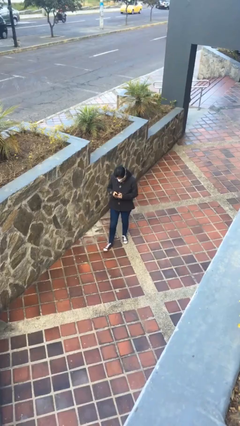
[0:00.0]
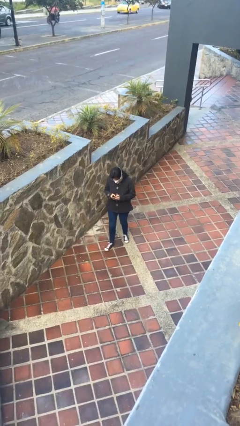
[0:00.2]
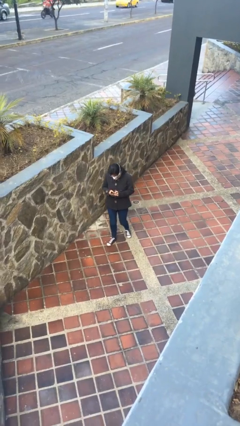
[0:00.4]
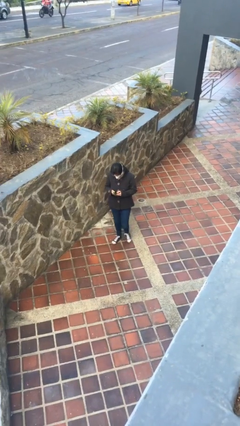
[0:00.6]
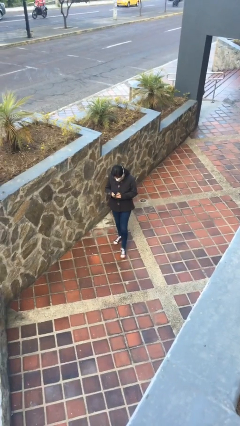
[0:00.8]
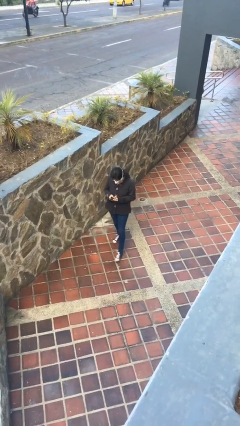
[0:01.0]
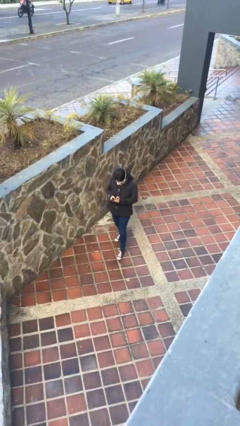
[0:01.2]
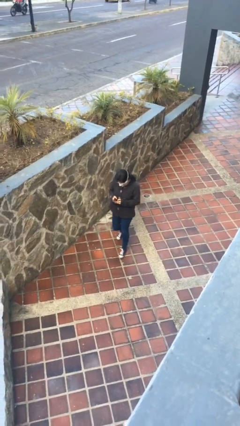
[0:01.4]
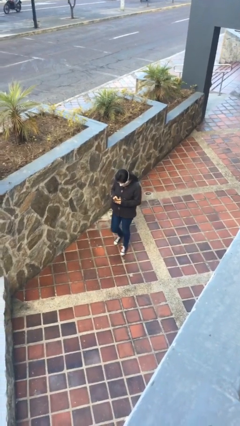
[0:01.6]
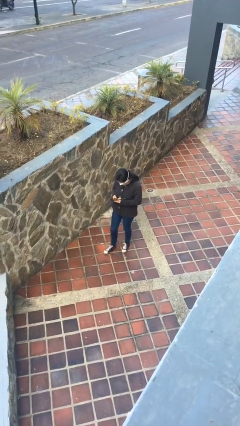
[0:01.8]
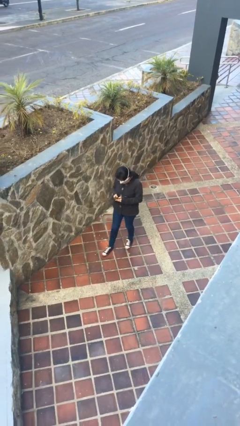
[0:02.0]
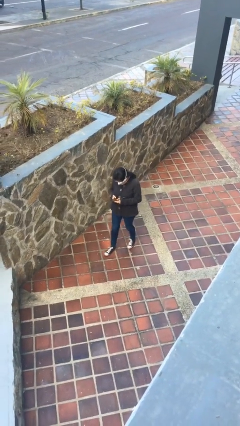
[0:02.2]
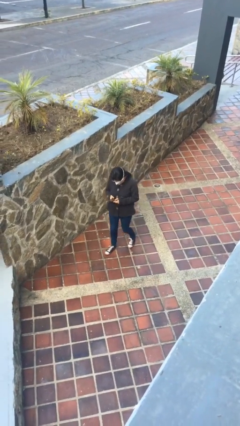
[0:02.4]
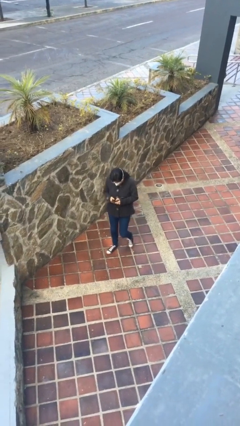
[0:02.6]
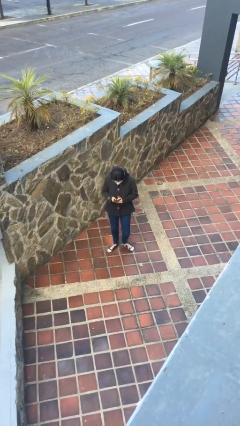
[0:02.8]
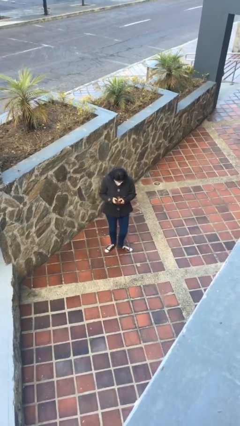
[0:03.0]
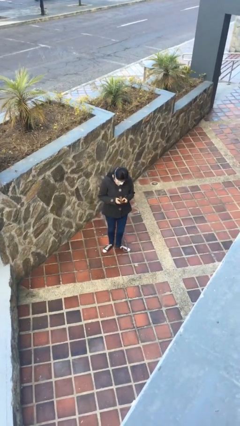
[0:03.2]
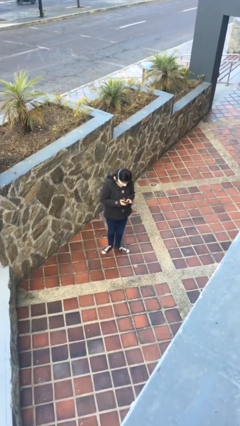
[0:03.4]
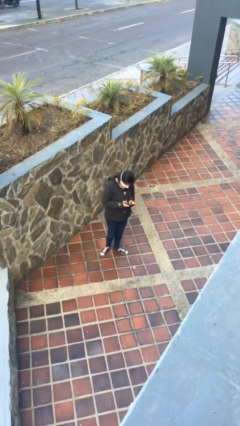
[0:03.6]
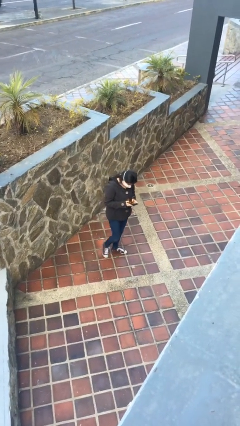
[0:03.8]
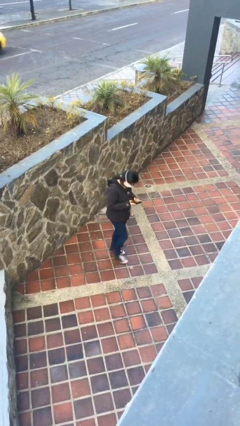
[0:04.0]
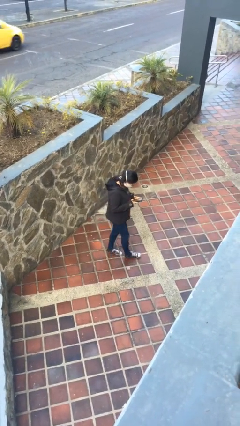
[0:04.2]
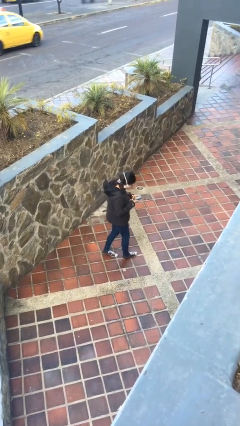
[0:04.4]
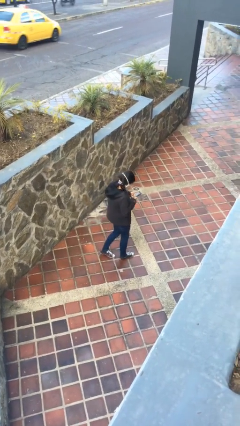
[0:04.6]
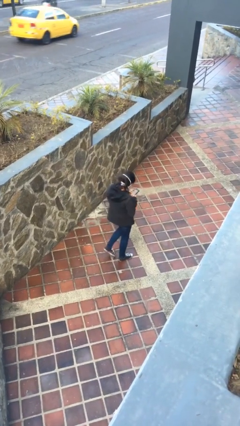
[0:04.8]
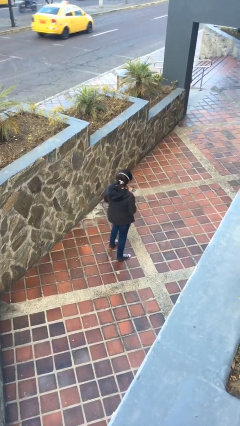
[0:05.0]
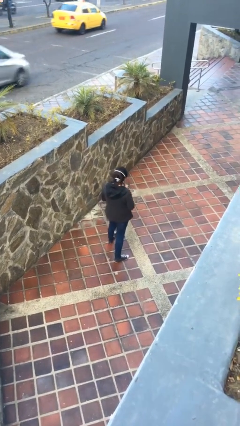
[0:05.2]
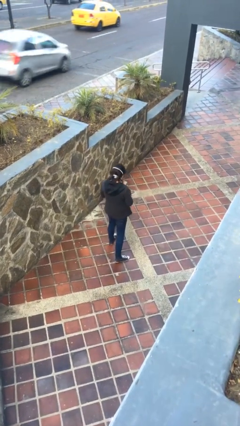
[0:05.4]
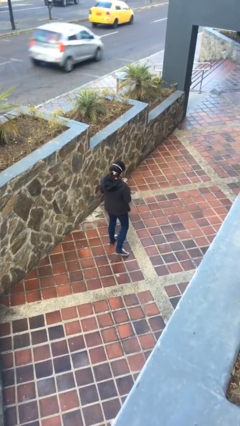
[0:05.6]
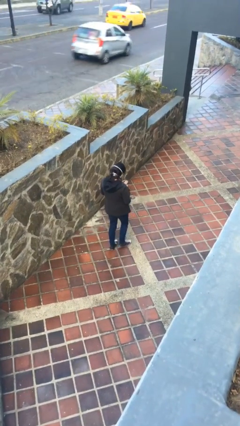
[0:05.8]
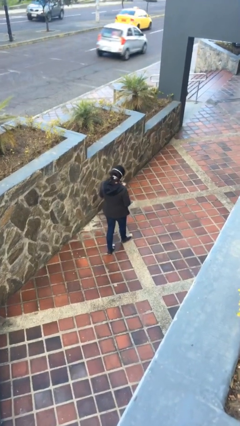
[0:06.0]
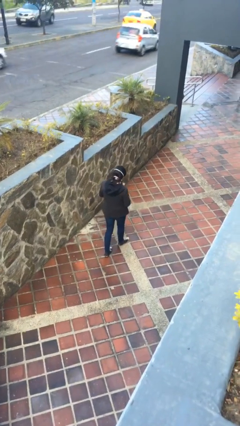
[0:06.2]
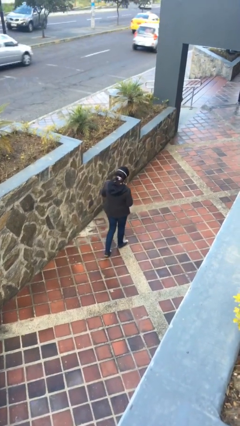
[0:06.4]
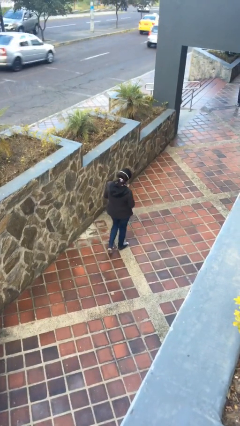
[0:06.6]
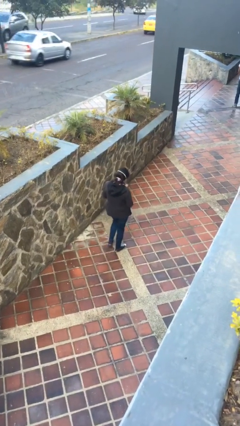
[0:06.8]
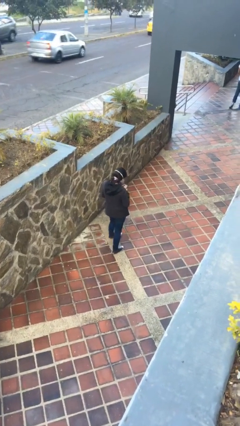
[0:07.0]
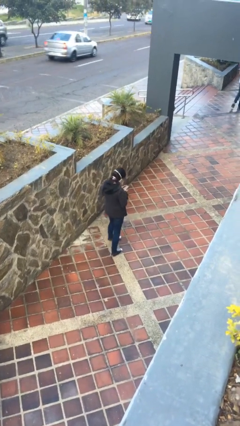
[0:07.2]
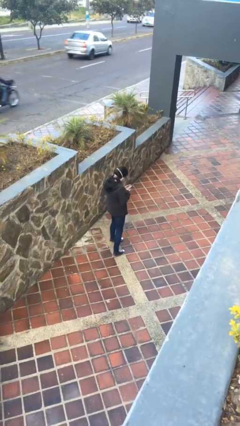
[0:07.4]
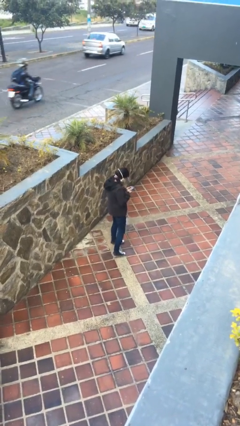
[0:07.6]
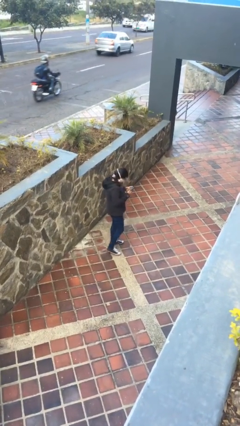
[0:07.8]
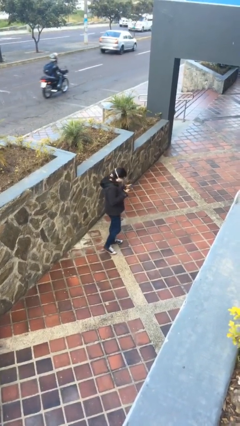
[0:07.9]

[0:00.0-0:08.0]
person texts on phone

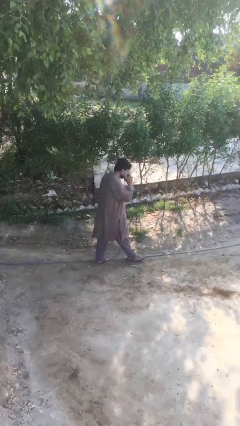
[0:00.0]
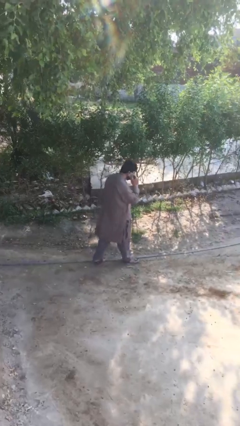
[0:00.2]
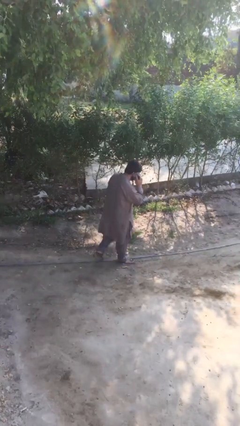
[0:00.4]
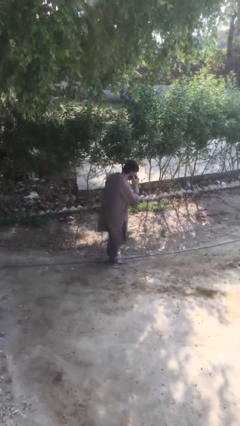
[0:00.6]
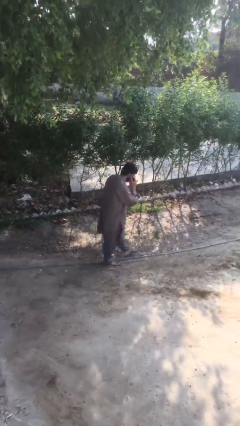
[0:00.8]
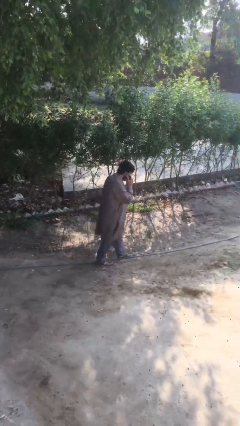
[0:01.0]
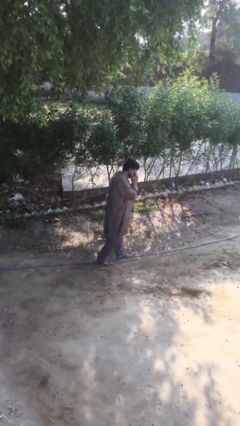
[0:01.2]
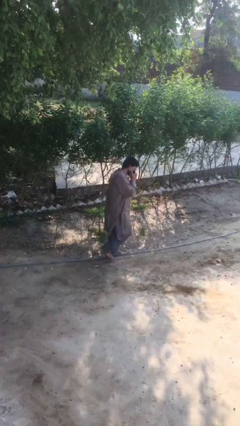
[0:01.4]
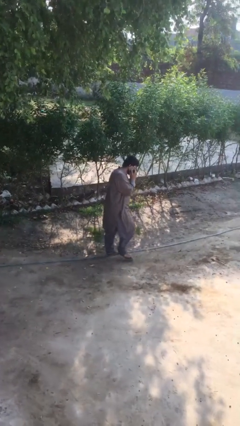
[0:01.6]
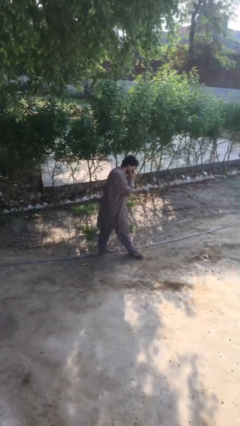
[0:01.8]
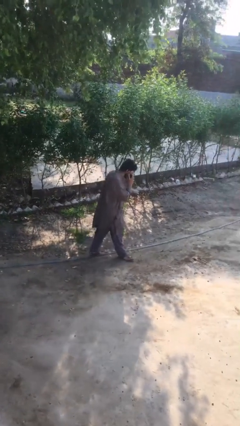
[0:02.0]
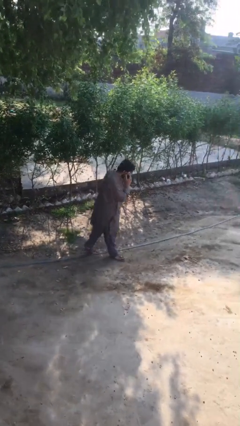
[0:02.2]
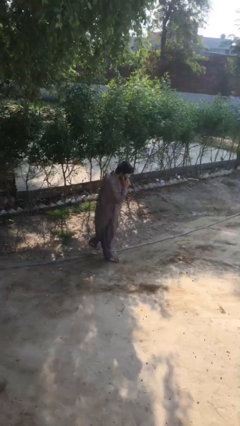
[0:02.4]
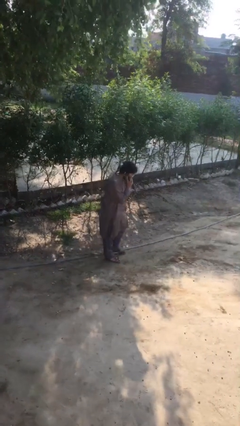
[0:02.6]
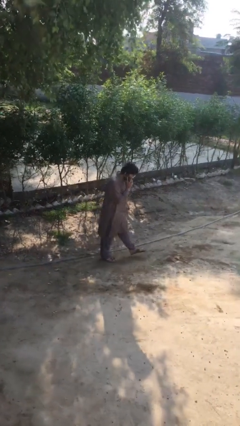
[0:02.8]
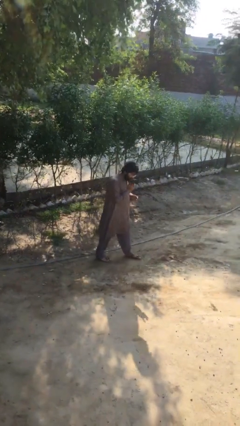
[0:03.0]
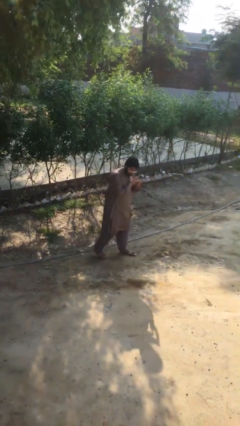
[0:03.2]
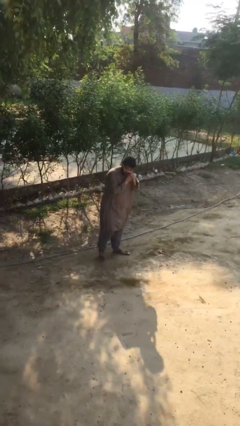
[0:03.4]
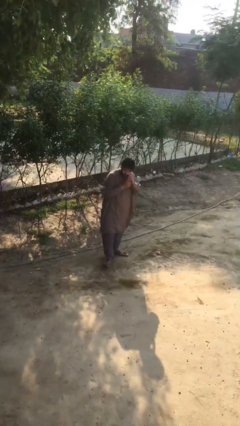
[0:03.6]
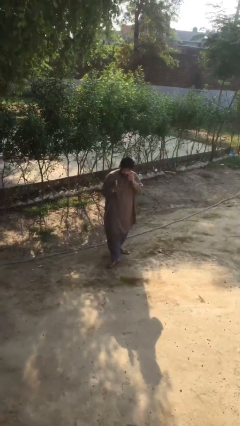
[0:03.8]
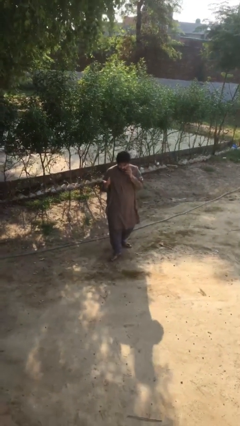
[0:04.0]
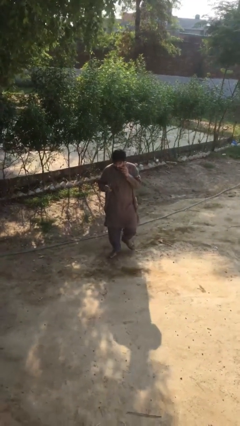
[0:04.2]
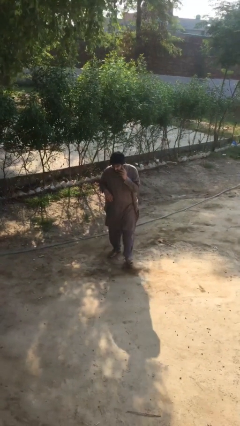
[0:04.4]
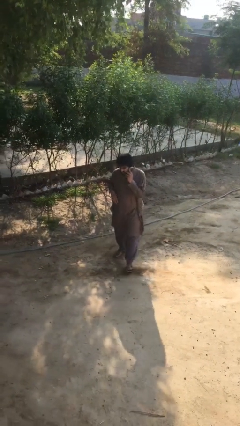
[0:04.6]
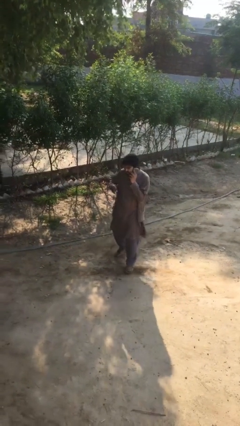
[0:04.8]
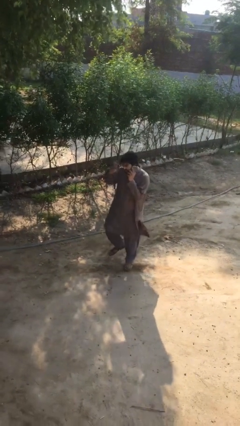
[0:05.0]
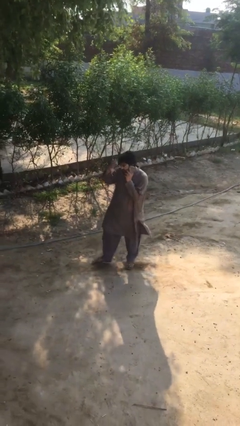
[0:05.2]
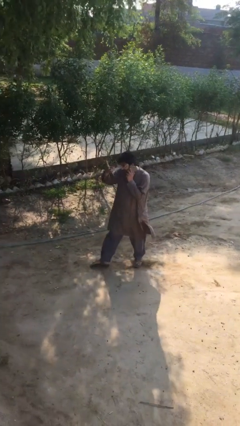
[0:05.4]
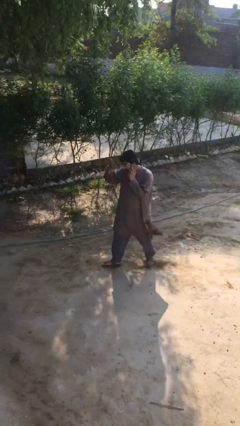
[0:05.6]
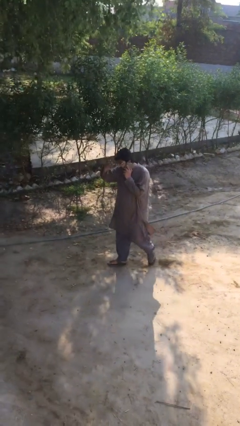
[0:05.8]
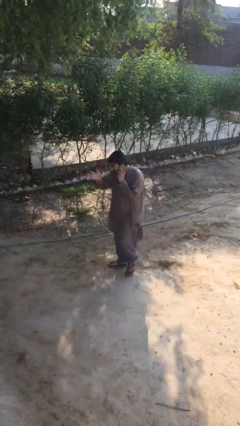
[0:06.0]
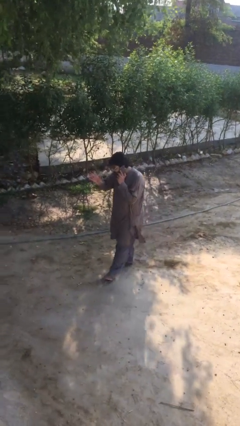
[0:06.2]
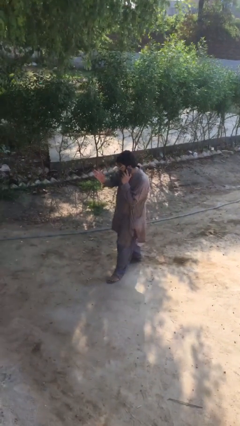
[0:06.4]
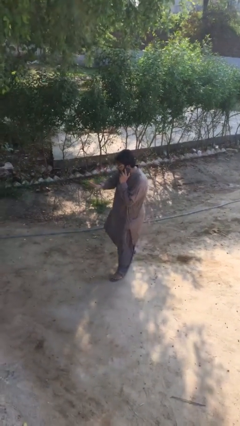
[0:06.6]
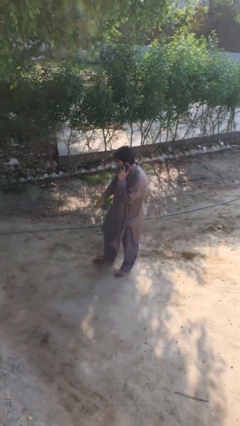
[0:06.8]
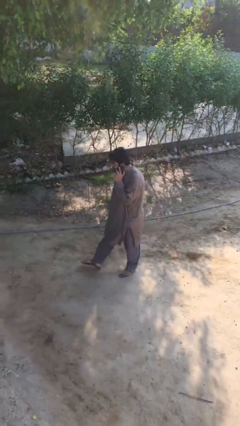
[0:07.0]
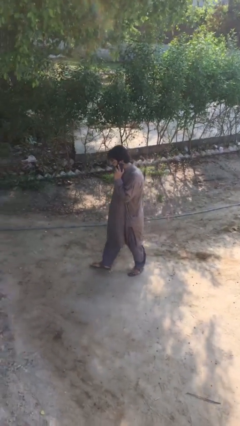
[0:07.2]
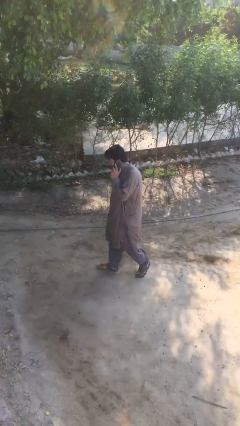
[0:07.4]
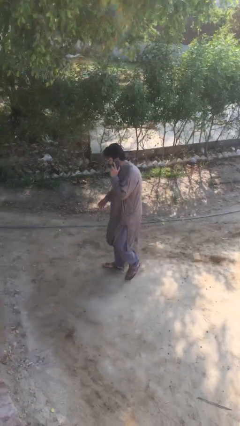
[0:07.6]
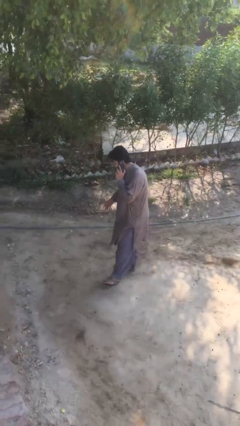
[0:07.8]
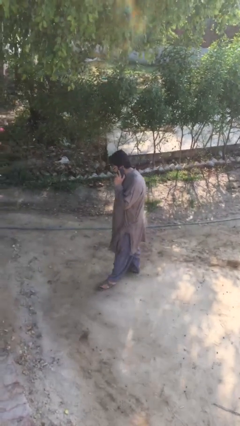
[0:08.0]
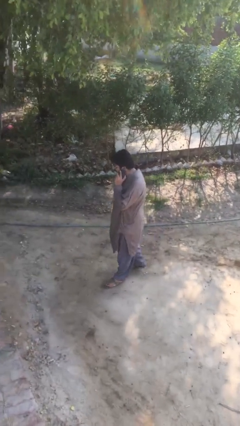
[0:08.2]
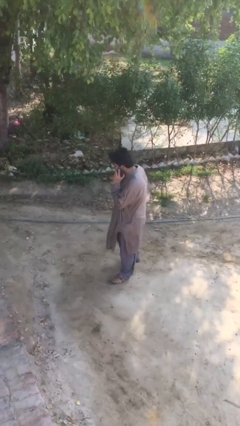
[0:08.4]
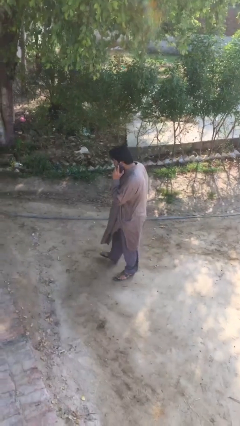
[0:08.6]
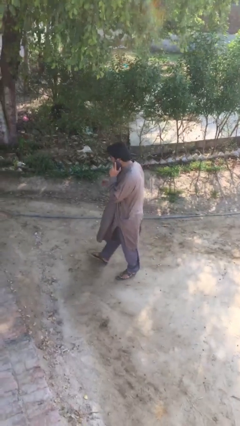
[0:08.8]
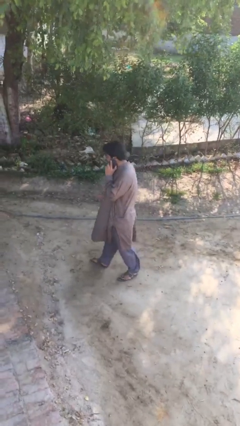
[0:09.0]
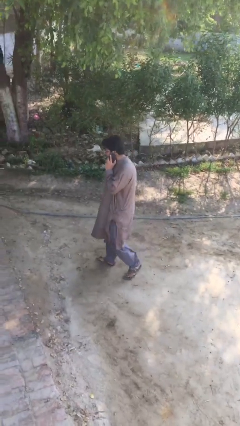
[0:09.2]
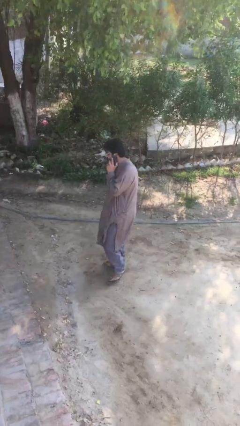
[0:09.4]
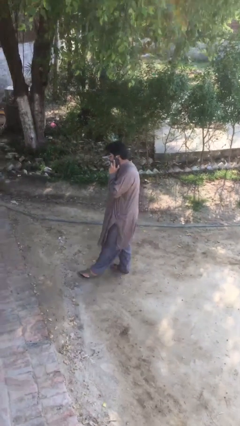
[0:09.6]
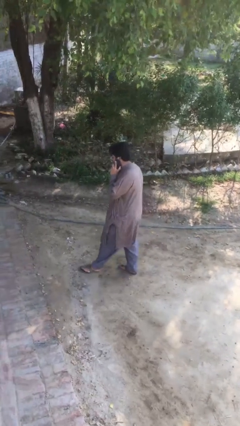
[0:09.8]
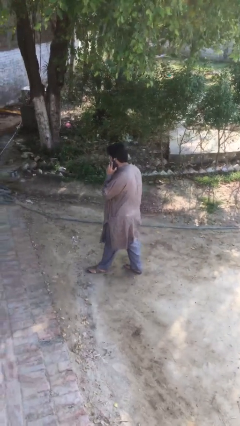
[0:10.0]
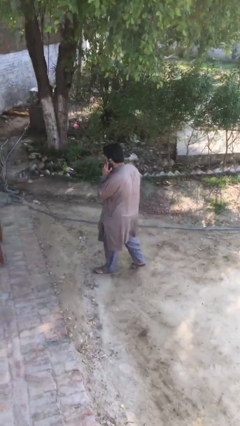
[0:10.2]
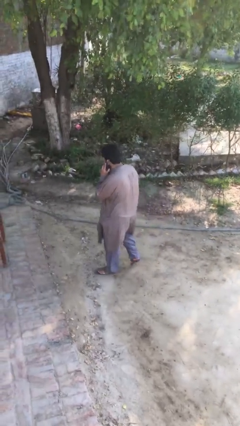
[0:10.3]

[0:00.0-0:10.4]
person talks on phone
